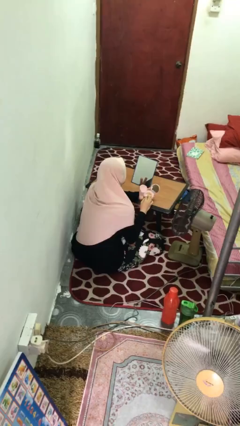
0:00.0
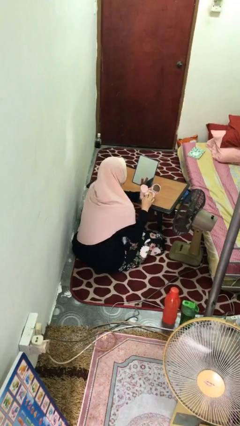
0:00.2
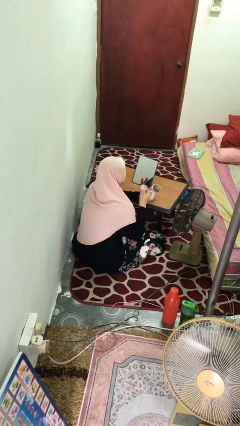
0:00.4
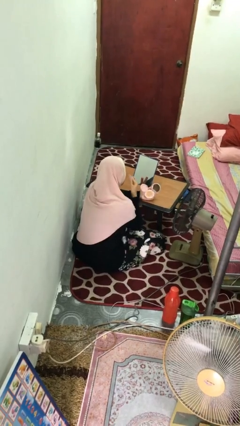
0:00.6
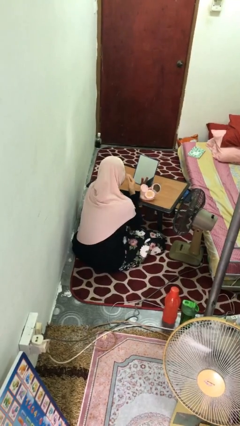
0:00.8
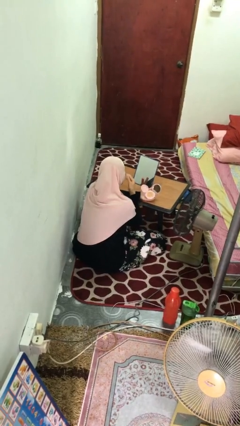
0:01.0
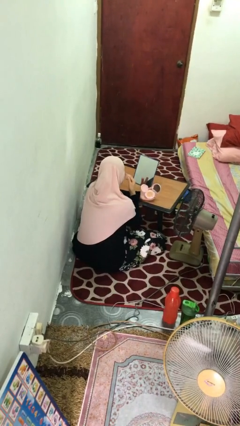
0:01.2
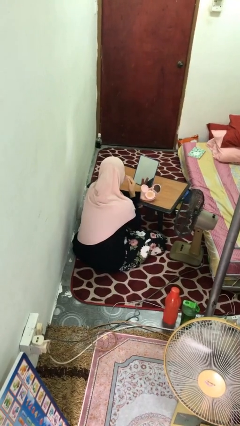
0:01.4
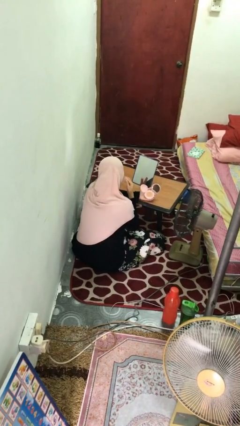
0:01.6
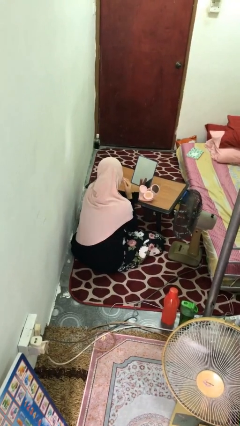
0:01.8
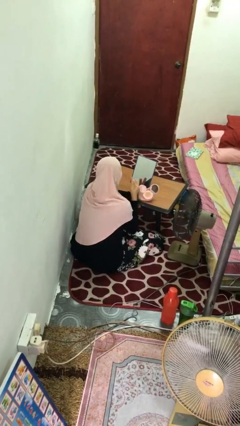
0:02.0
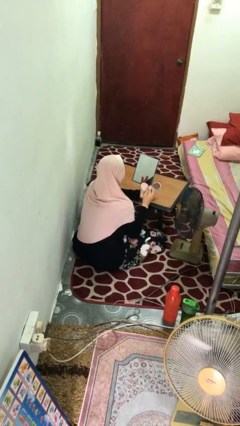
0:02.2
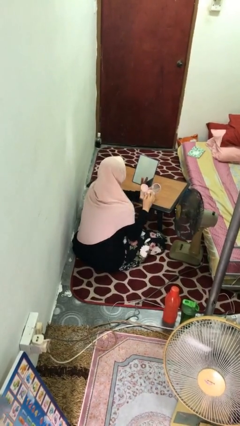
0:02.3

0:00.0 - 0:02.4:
person applies foundation makeup

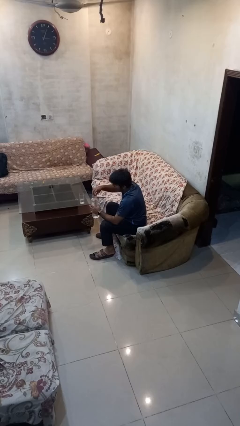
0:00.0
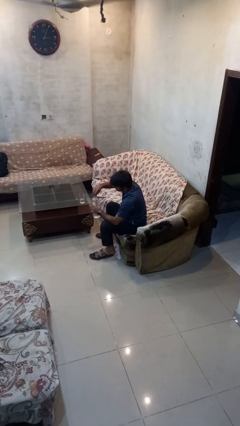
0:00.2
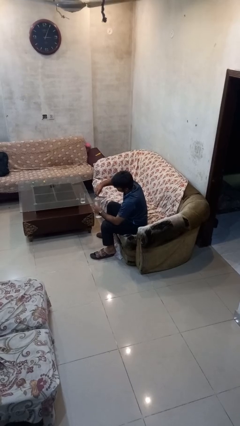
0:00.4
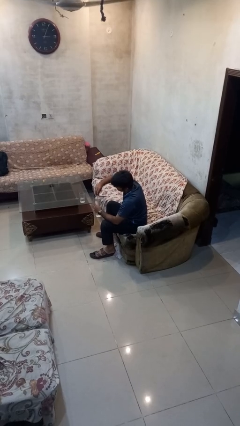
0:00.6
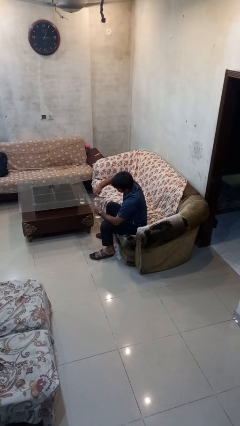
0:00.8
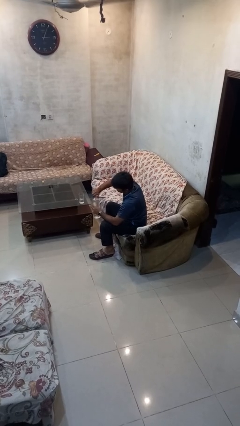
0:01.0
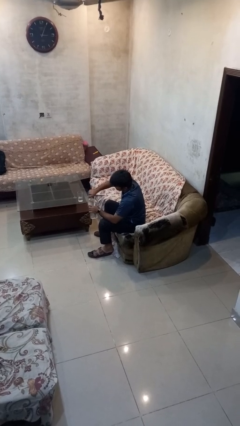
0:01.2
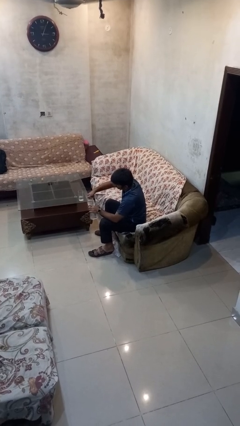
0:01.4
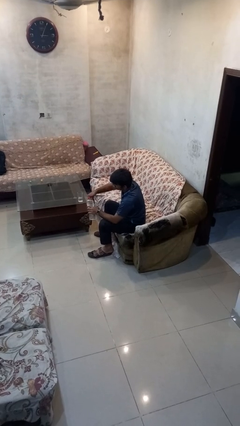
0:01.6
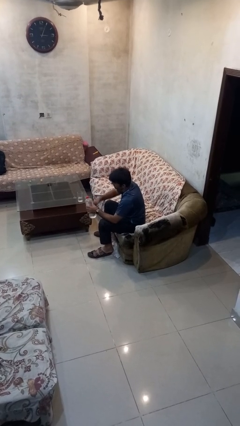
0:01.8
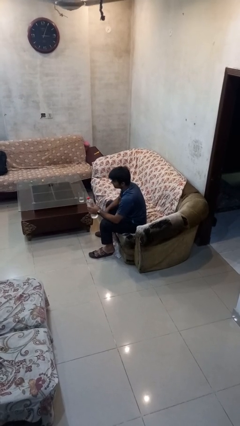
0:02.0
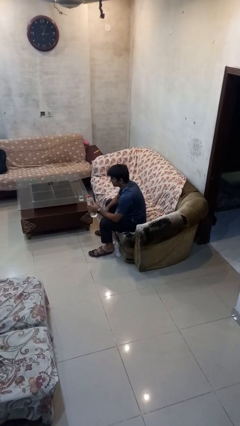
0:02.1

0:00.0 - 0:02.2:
person screws lid to bottle

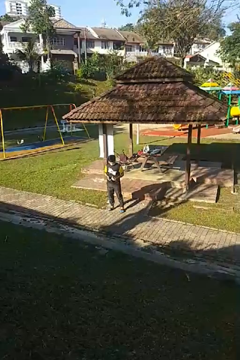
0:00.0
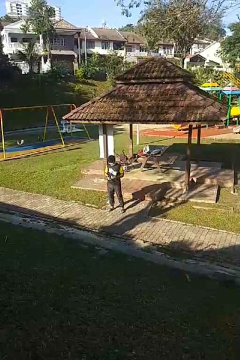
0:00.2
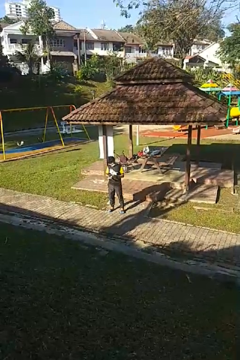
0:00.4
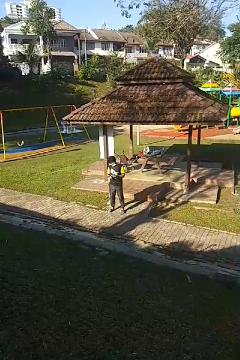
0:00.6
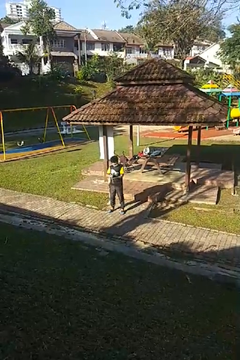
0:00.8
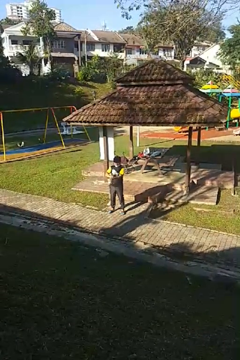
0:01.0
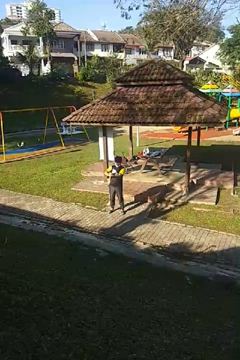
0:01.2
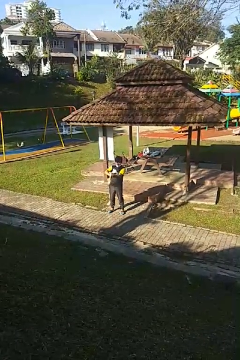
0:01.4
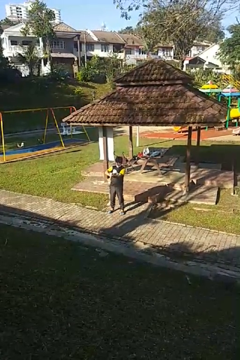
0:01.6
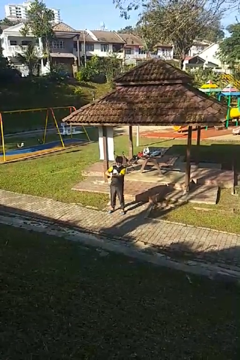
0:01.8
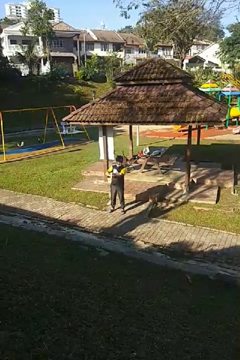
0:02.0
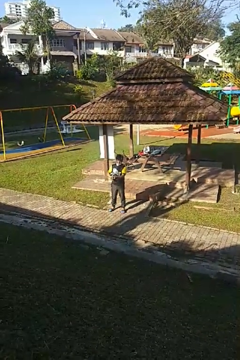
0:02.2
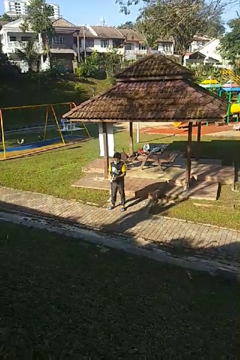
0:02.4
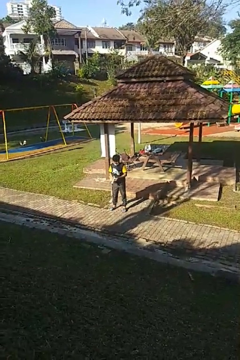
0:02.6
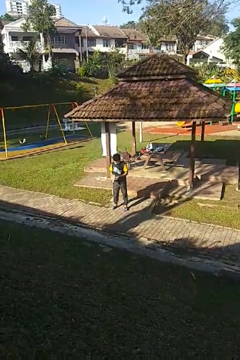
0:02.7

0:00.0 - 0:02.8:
person applies sunscreen

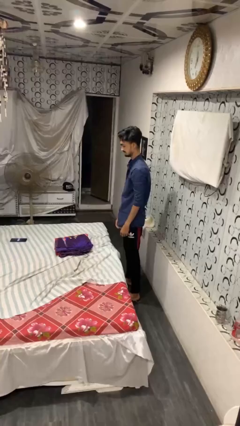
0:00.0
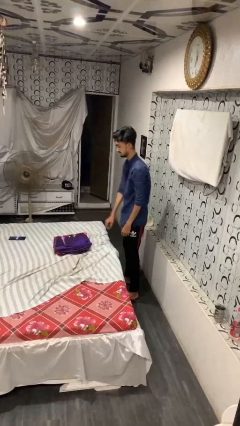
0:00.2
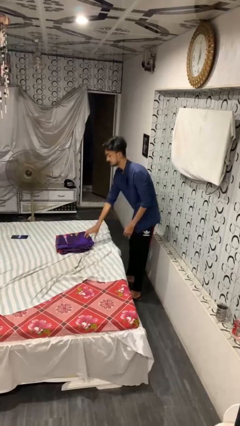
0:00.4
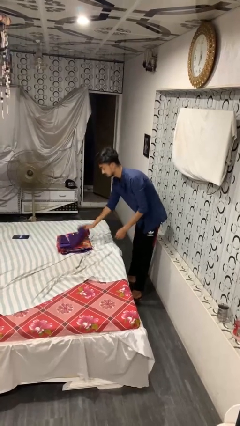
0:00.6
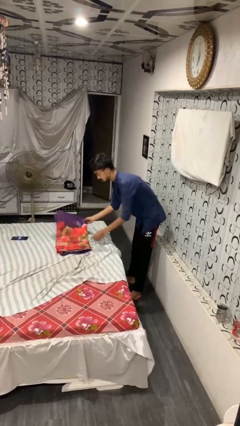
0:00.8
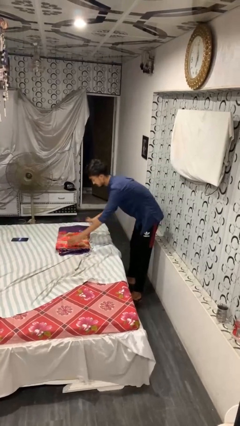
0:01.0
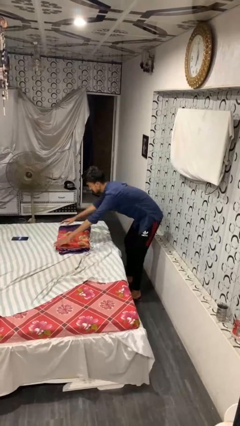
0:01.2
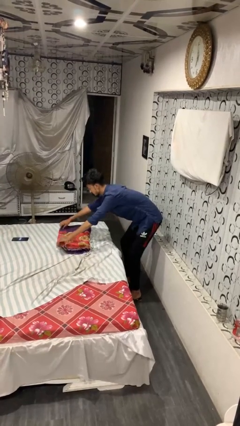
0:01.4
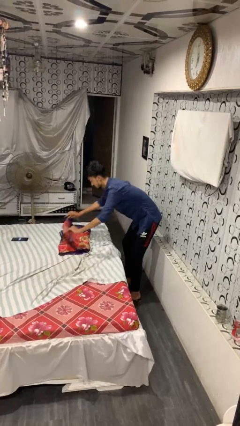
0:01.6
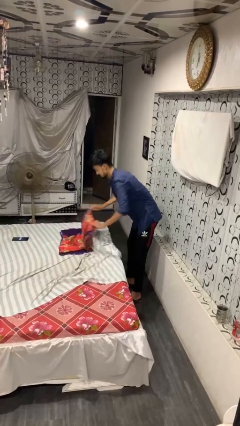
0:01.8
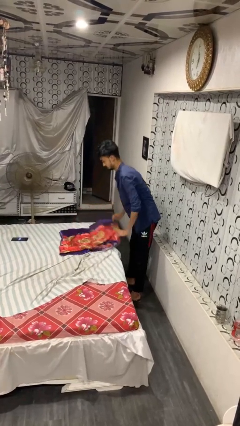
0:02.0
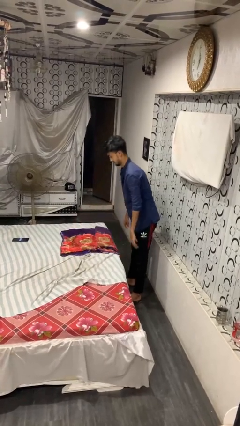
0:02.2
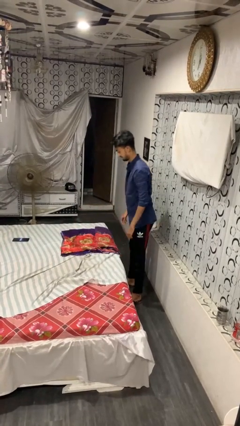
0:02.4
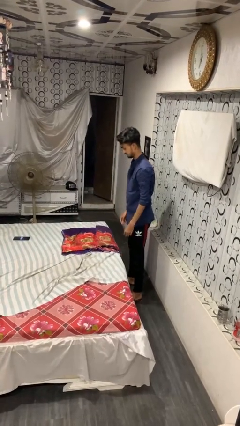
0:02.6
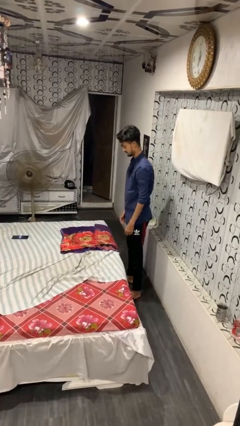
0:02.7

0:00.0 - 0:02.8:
person unfolds blanket

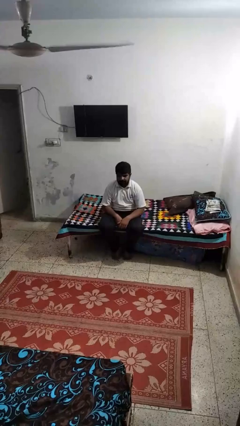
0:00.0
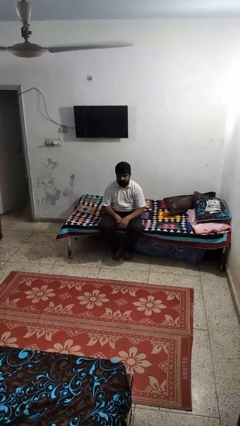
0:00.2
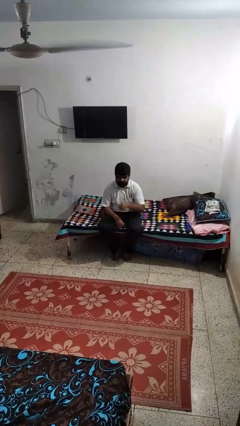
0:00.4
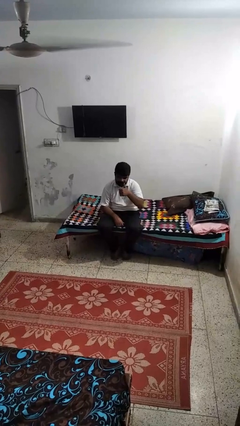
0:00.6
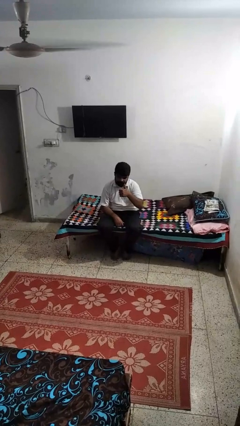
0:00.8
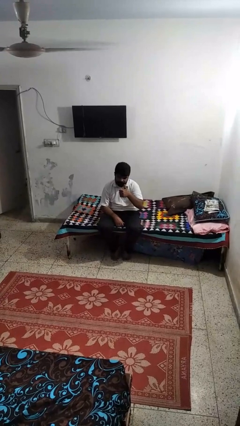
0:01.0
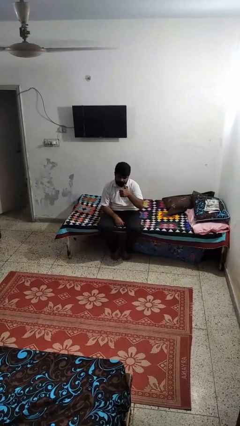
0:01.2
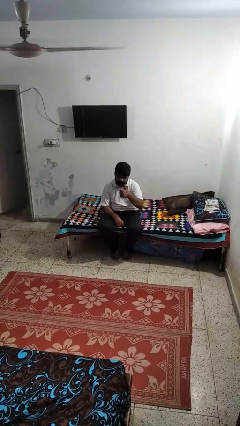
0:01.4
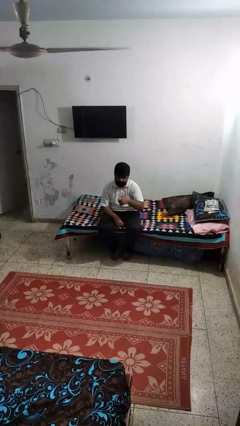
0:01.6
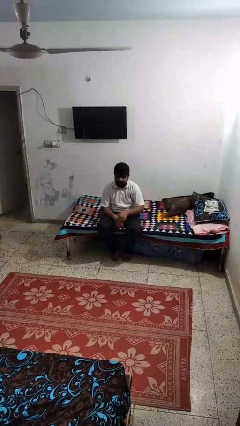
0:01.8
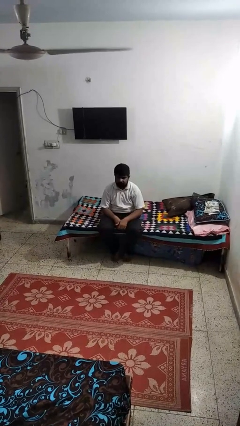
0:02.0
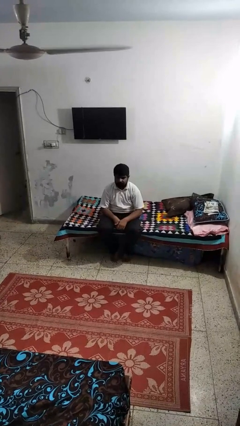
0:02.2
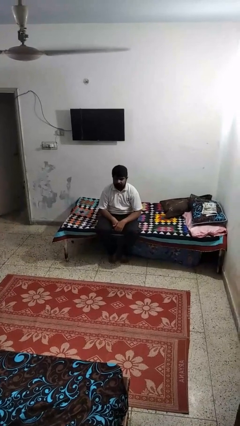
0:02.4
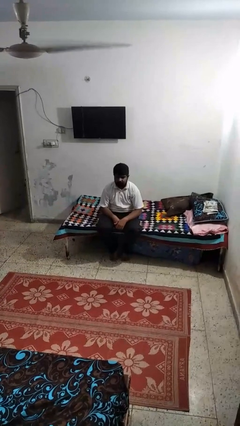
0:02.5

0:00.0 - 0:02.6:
person gestures thumbs up

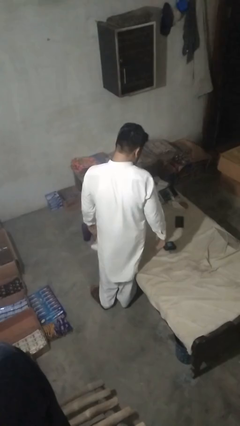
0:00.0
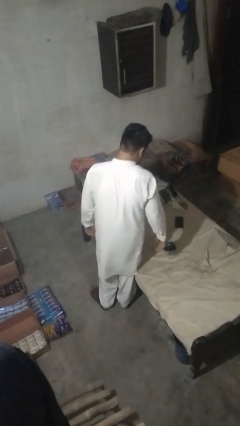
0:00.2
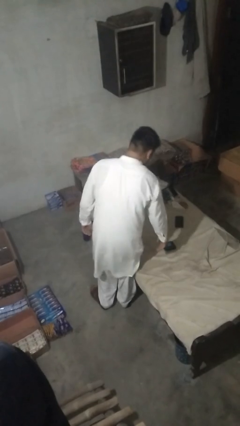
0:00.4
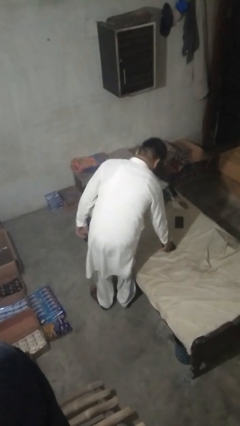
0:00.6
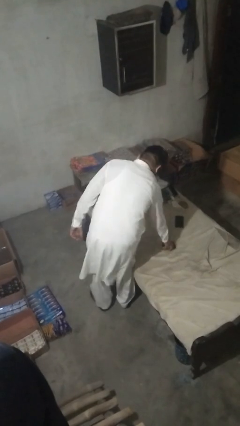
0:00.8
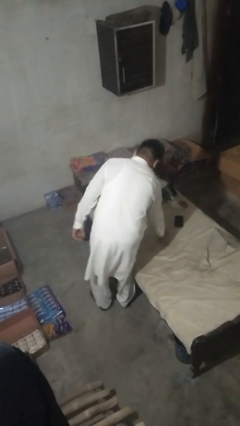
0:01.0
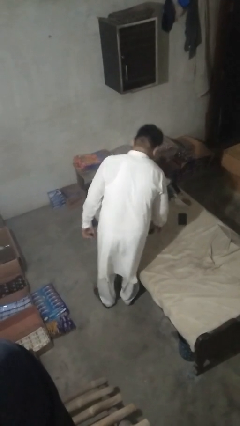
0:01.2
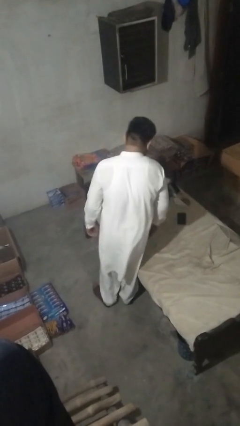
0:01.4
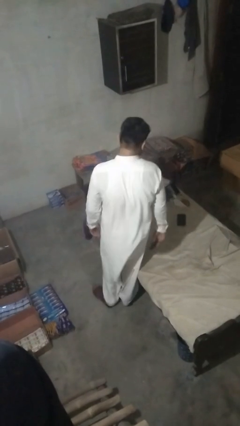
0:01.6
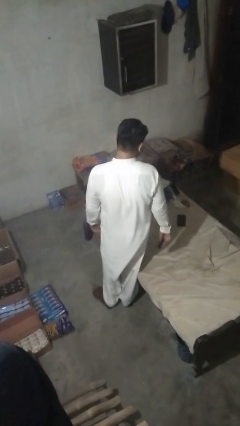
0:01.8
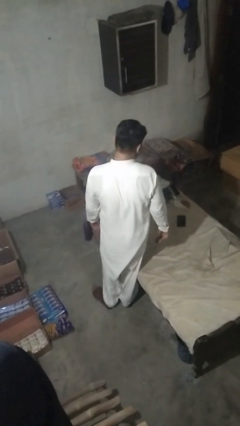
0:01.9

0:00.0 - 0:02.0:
person picks up object from bed

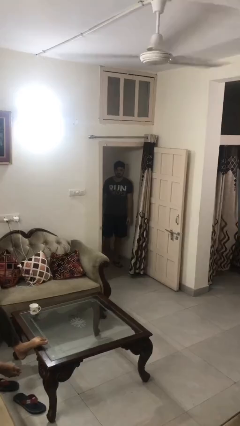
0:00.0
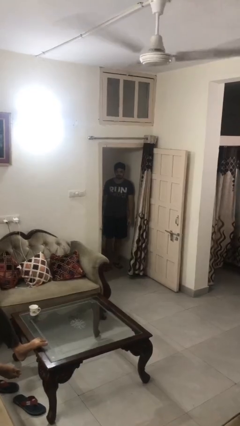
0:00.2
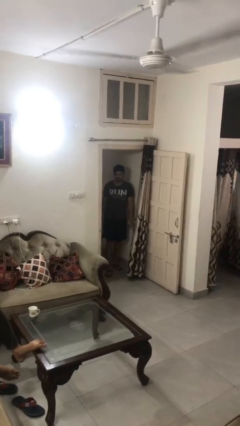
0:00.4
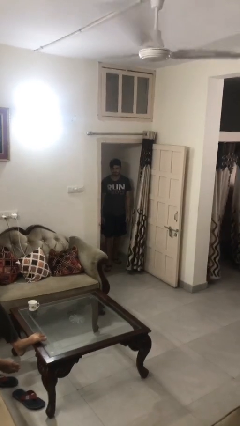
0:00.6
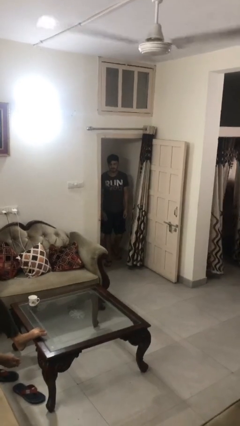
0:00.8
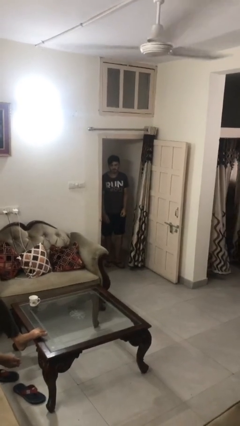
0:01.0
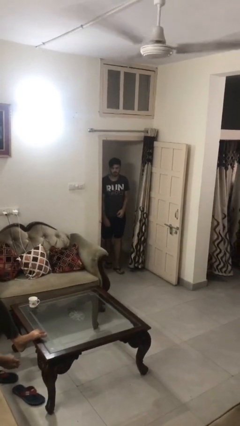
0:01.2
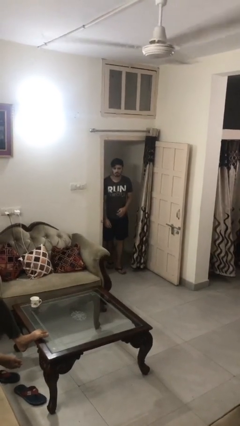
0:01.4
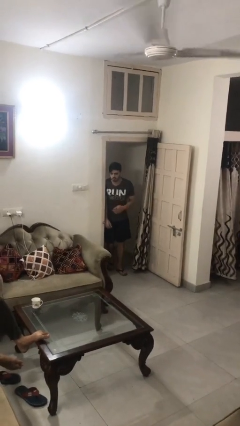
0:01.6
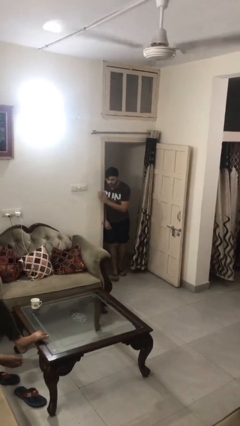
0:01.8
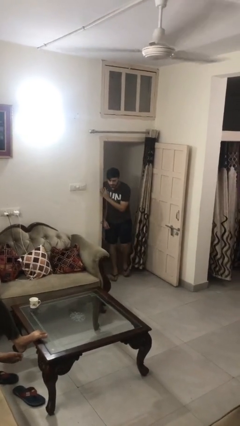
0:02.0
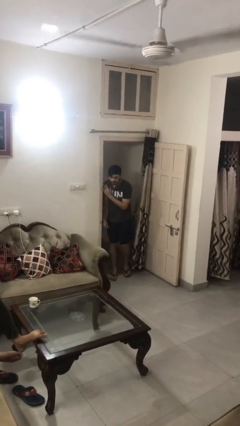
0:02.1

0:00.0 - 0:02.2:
person bumps into wall

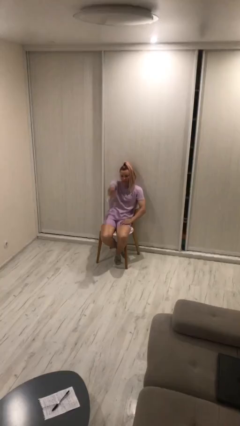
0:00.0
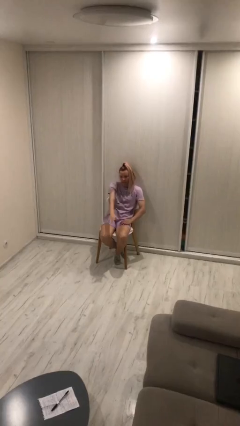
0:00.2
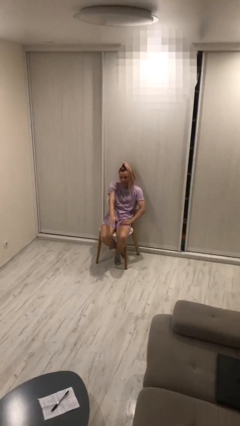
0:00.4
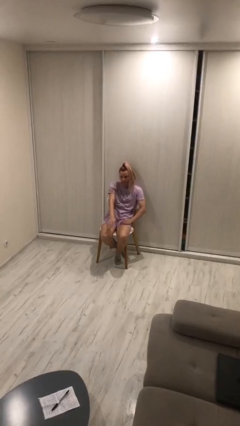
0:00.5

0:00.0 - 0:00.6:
person gestures swipe down
